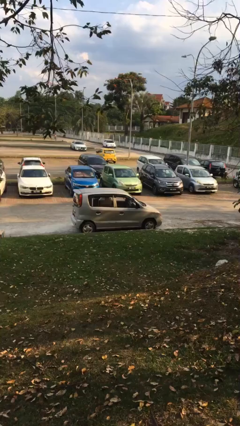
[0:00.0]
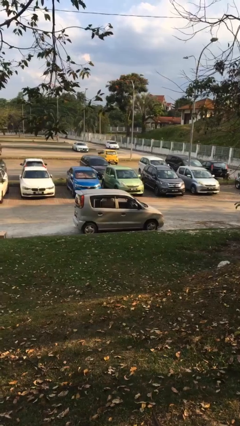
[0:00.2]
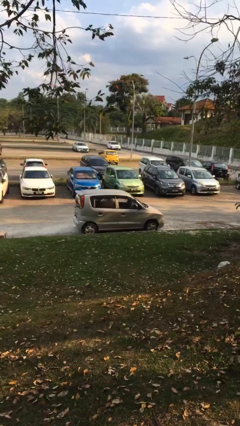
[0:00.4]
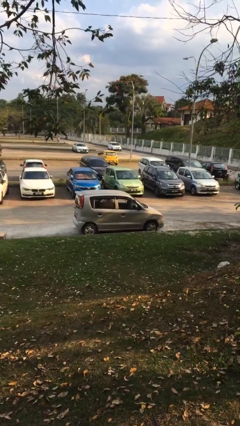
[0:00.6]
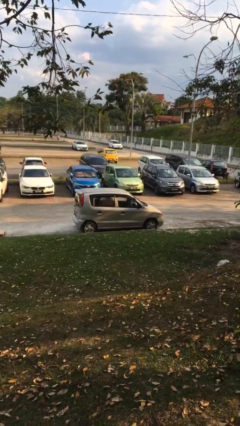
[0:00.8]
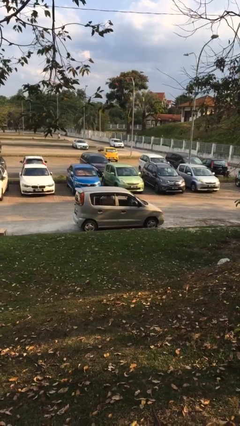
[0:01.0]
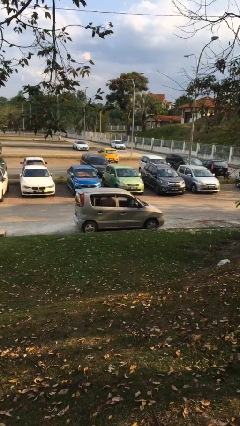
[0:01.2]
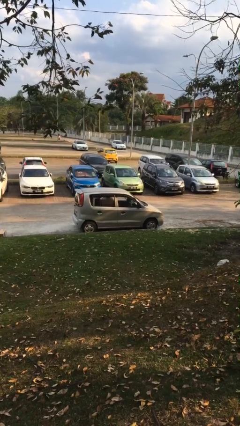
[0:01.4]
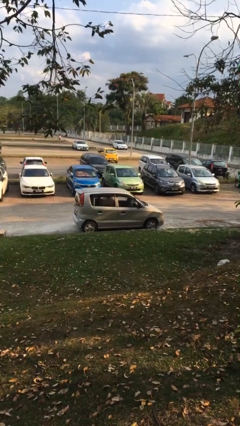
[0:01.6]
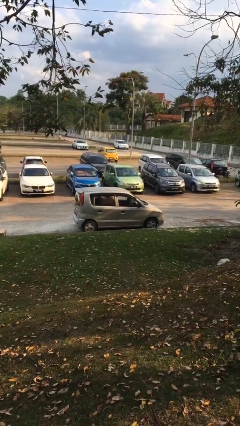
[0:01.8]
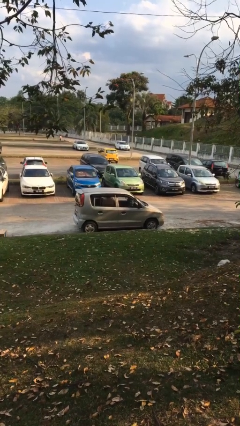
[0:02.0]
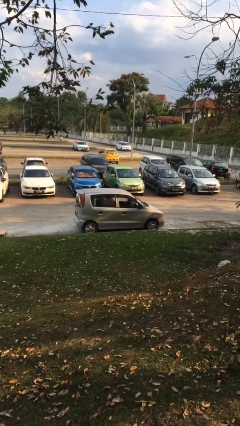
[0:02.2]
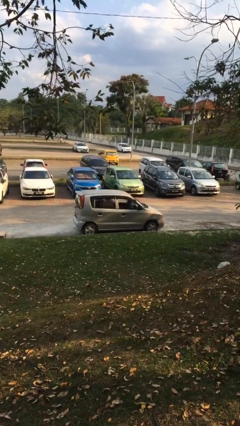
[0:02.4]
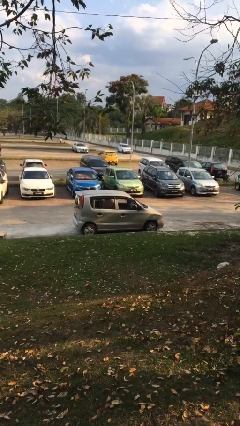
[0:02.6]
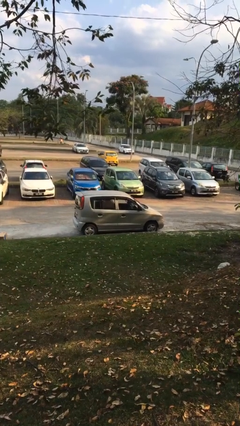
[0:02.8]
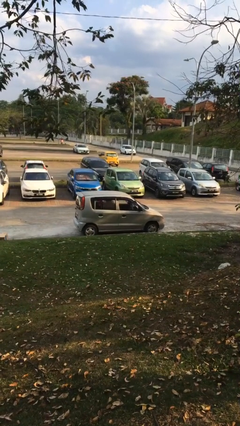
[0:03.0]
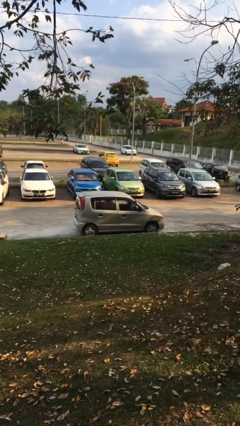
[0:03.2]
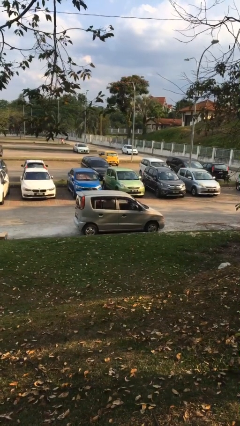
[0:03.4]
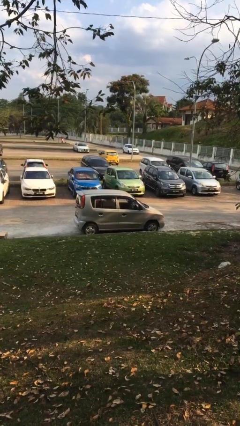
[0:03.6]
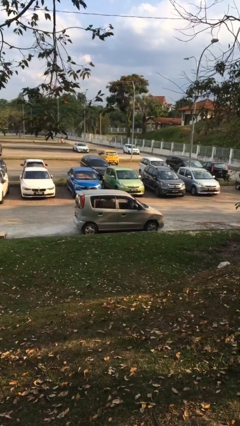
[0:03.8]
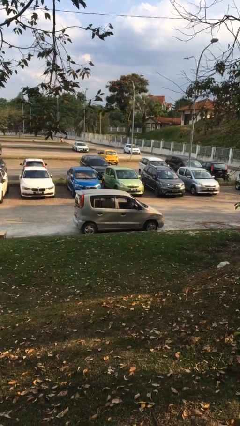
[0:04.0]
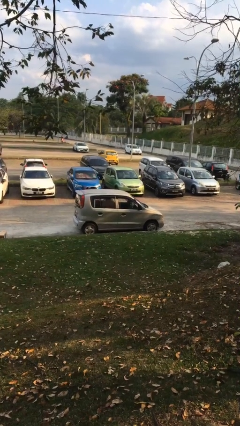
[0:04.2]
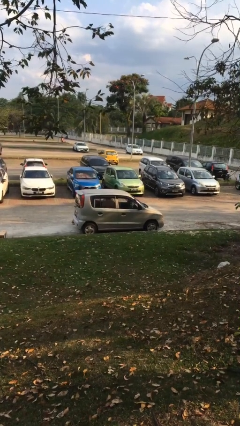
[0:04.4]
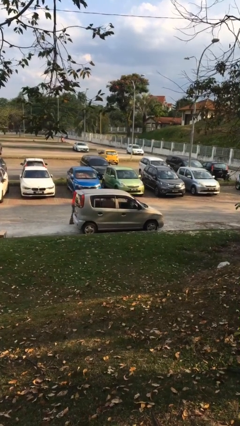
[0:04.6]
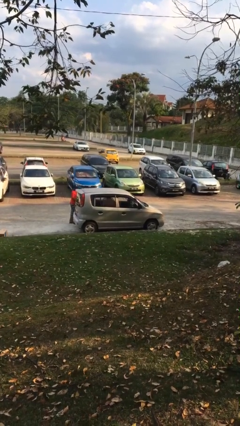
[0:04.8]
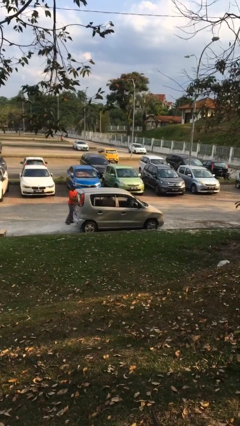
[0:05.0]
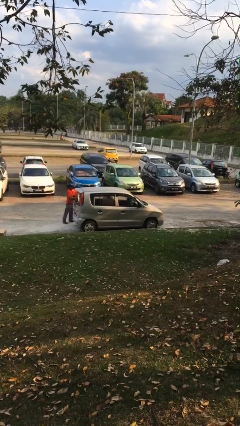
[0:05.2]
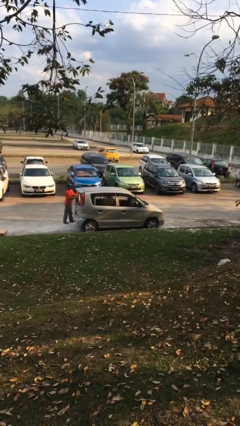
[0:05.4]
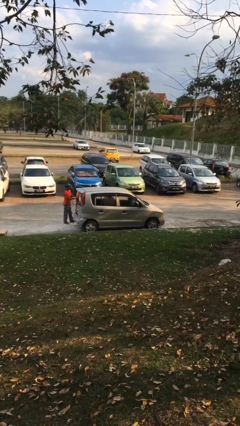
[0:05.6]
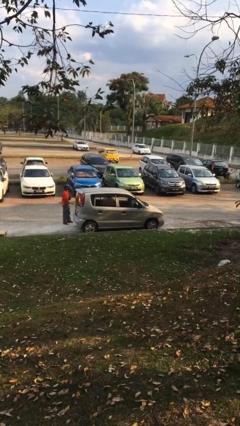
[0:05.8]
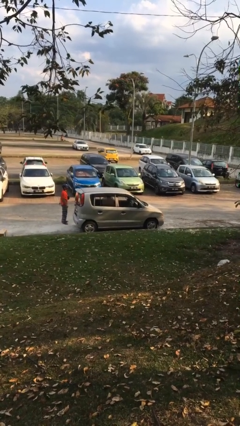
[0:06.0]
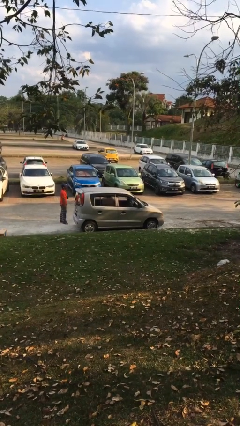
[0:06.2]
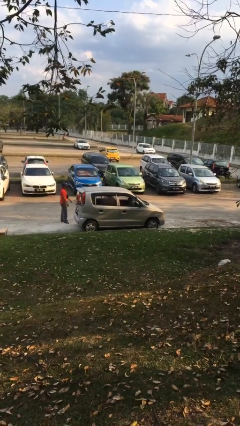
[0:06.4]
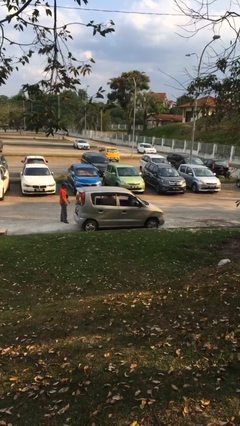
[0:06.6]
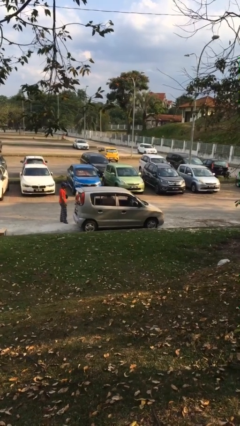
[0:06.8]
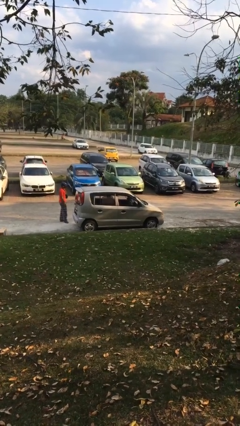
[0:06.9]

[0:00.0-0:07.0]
car drops off person

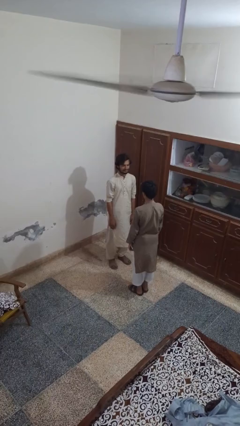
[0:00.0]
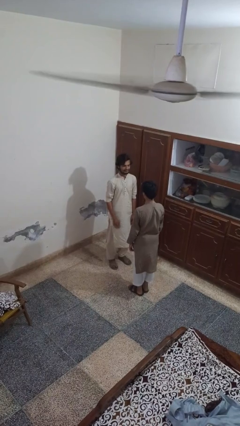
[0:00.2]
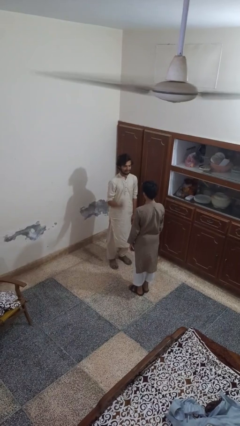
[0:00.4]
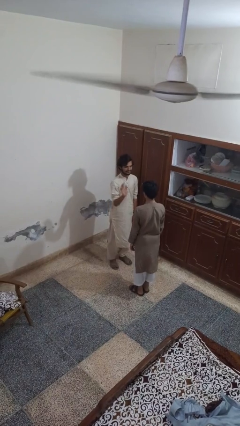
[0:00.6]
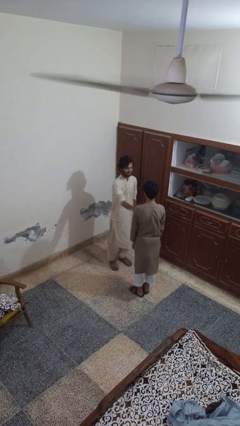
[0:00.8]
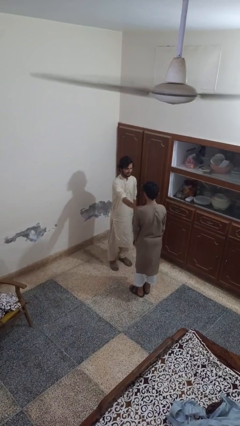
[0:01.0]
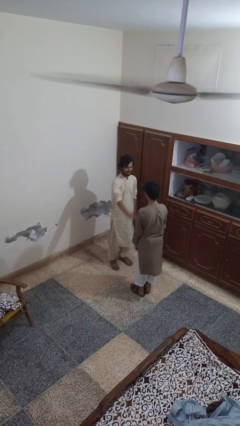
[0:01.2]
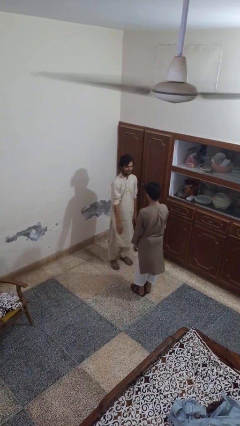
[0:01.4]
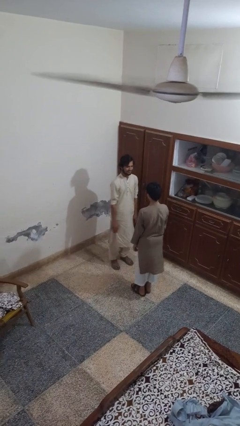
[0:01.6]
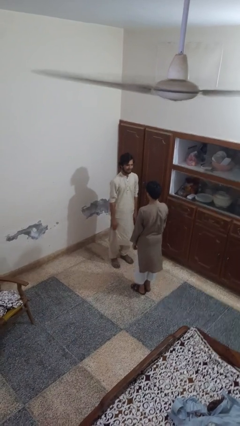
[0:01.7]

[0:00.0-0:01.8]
person shoves person

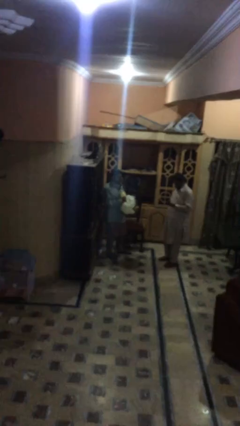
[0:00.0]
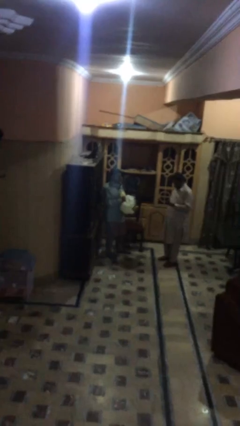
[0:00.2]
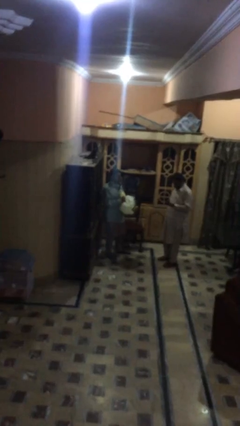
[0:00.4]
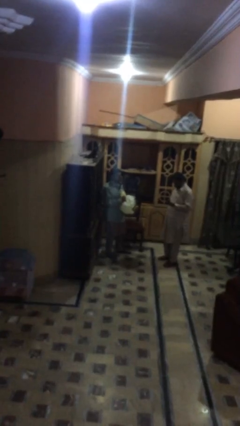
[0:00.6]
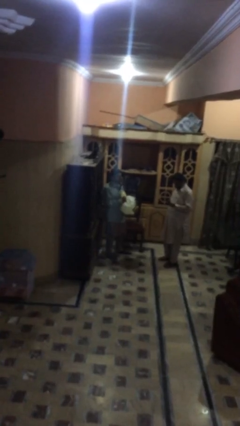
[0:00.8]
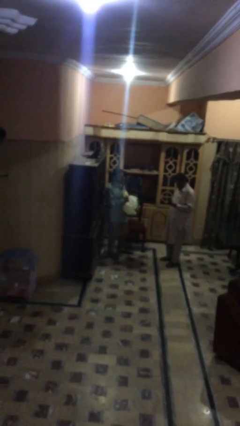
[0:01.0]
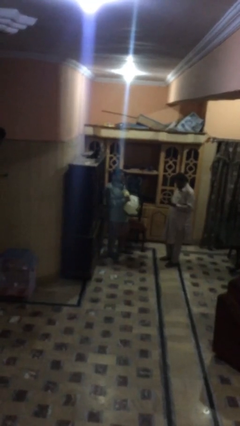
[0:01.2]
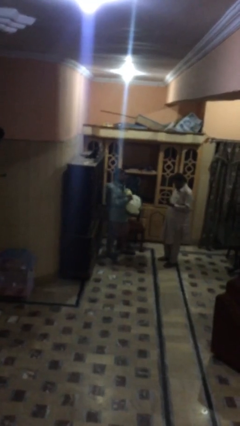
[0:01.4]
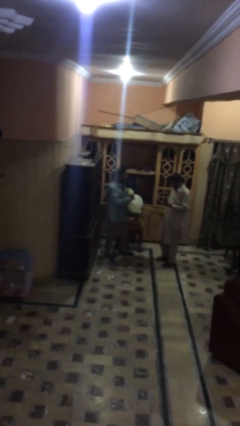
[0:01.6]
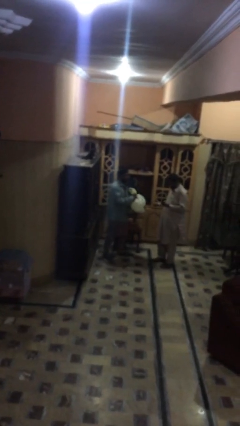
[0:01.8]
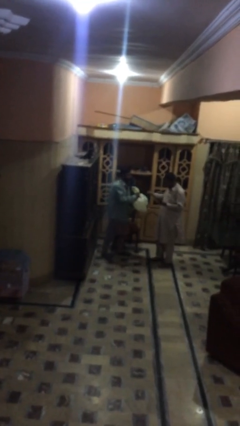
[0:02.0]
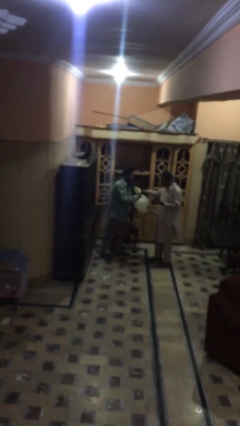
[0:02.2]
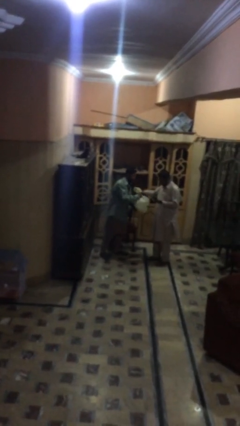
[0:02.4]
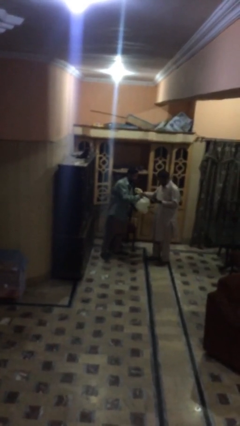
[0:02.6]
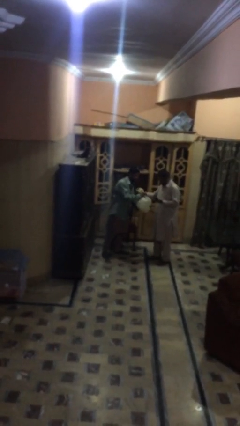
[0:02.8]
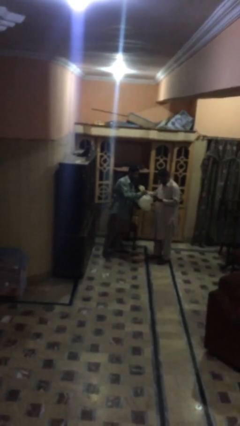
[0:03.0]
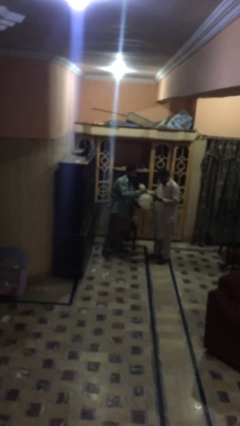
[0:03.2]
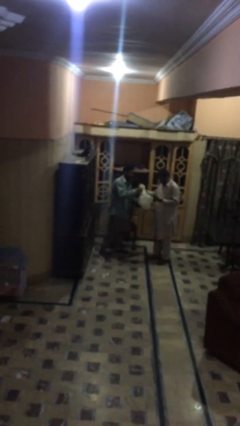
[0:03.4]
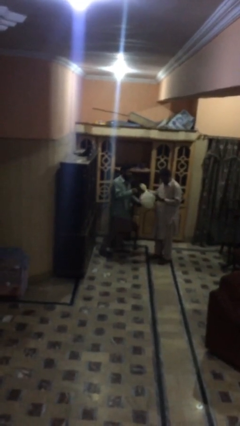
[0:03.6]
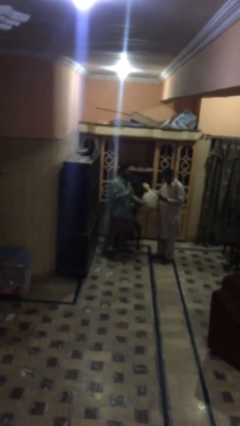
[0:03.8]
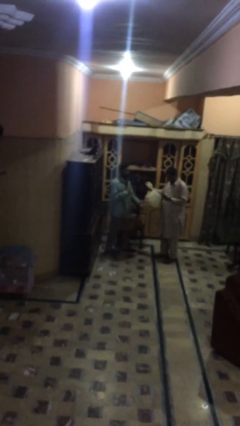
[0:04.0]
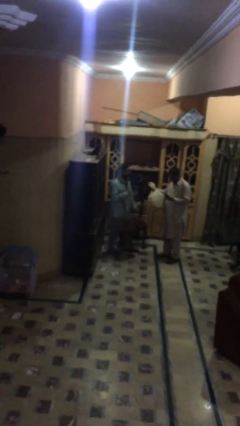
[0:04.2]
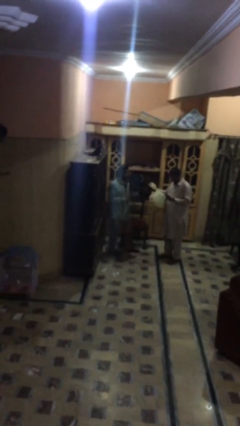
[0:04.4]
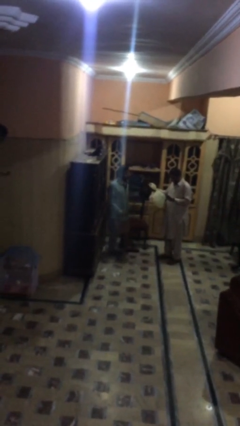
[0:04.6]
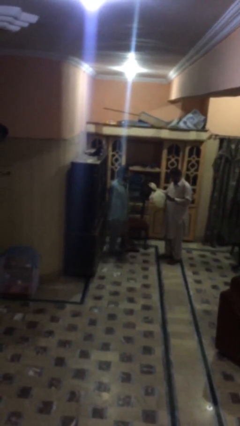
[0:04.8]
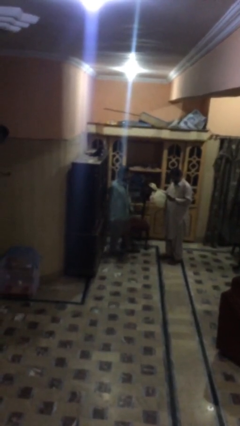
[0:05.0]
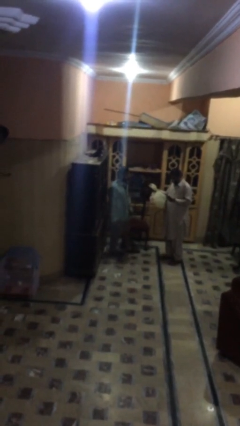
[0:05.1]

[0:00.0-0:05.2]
person transfers object to person

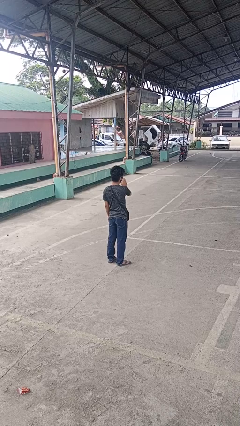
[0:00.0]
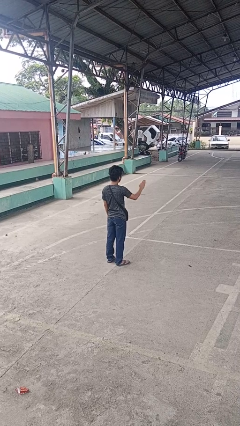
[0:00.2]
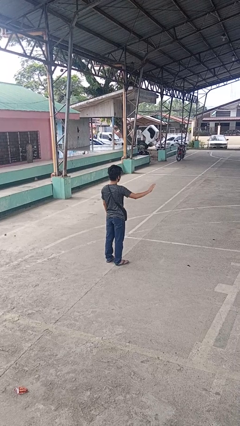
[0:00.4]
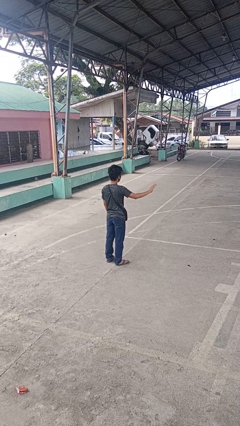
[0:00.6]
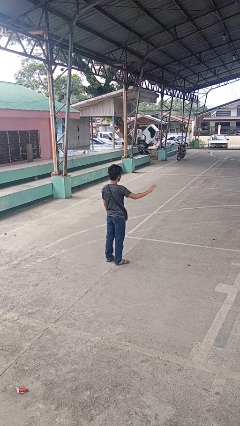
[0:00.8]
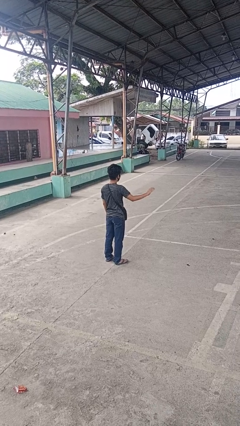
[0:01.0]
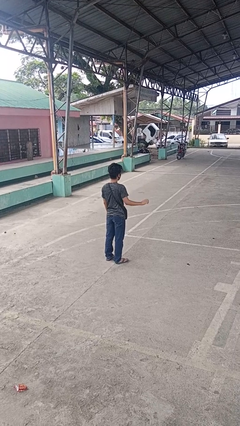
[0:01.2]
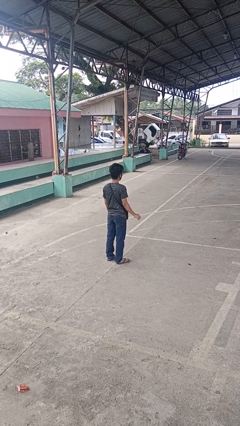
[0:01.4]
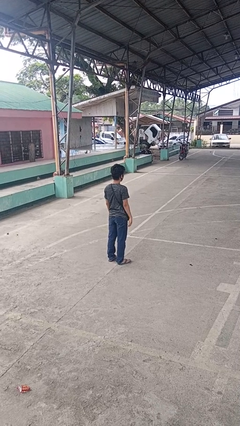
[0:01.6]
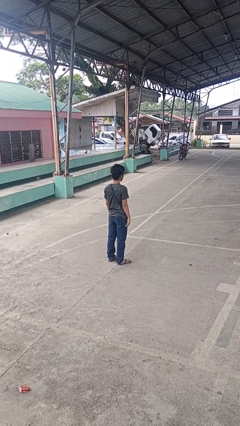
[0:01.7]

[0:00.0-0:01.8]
person gestures swipe right

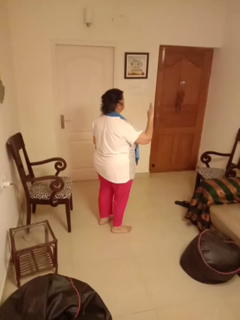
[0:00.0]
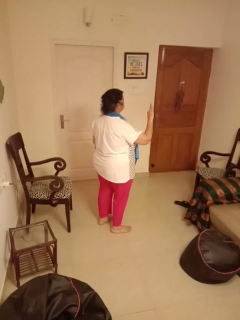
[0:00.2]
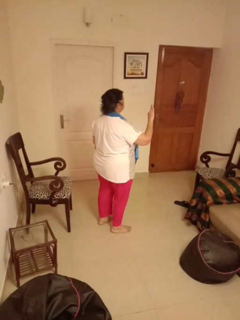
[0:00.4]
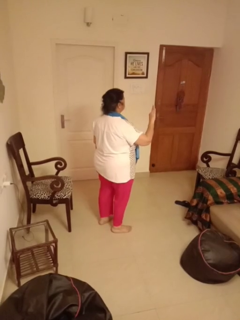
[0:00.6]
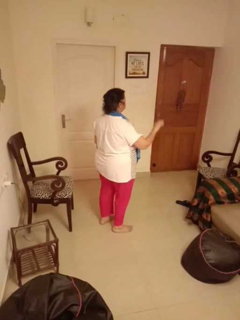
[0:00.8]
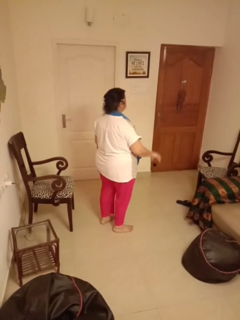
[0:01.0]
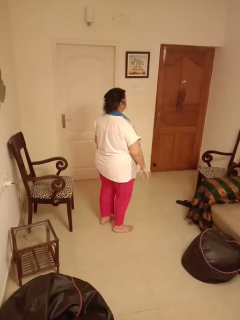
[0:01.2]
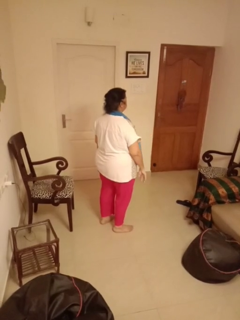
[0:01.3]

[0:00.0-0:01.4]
person gestures number three

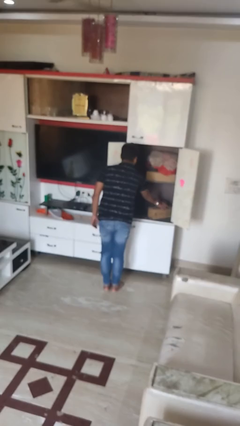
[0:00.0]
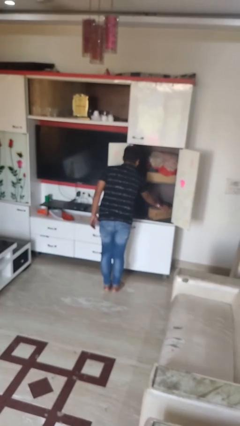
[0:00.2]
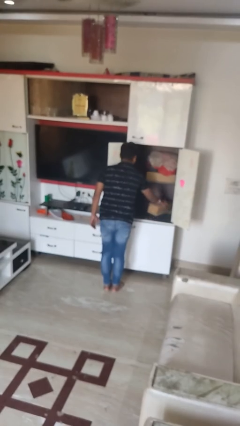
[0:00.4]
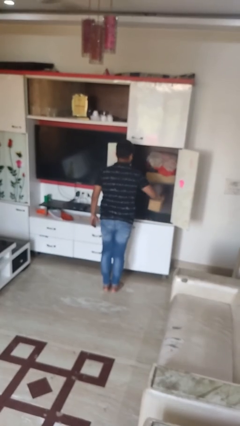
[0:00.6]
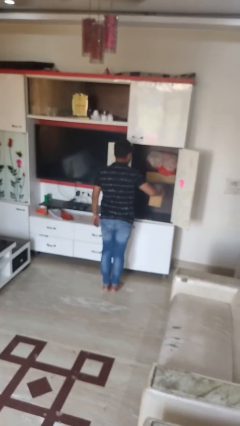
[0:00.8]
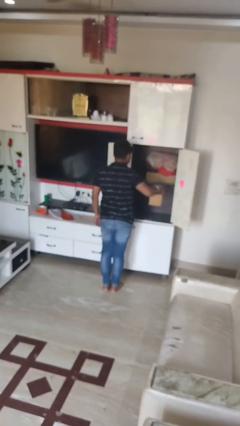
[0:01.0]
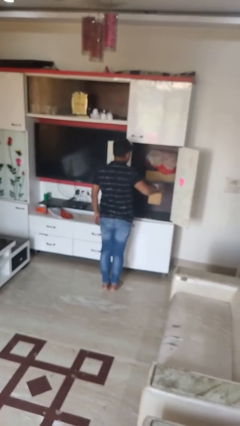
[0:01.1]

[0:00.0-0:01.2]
person picks up object from cabinet
